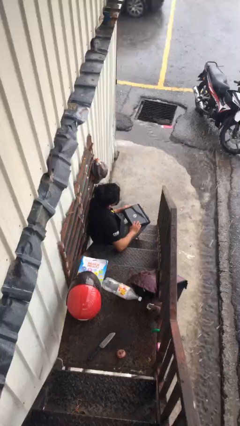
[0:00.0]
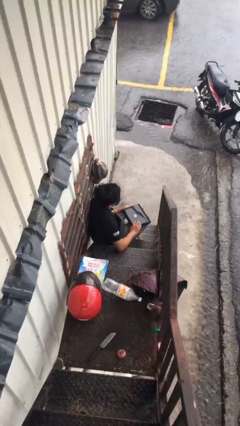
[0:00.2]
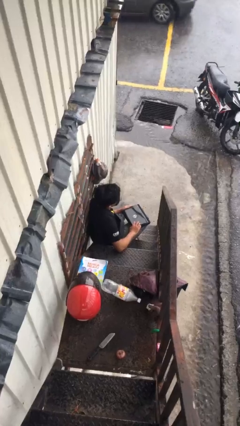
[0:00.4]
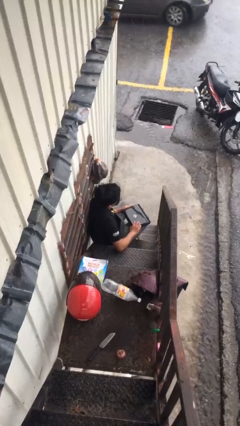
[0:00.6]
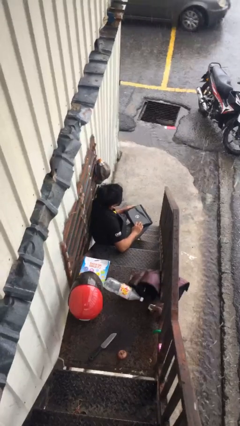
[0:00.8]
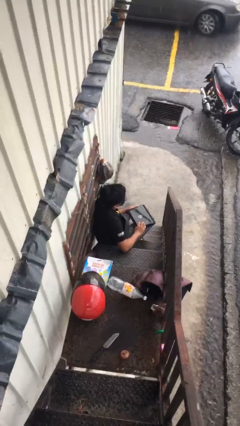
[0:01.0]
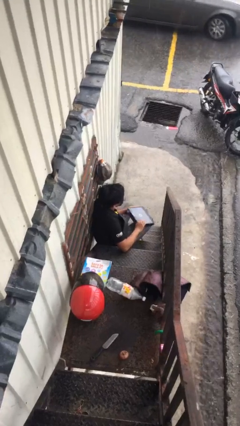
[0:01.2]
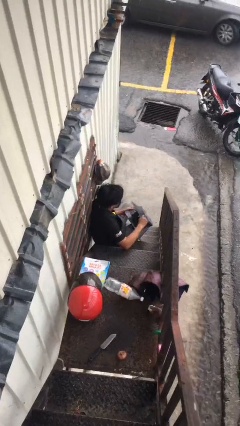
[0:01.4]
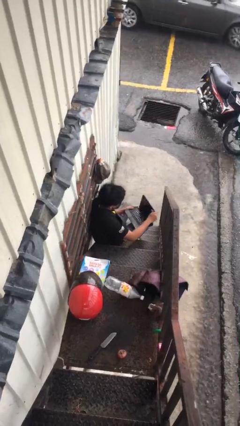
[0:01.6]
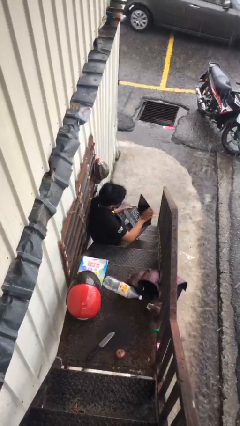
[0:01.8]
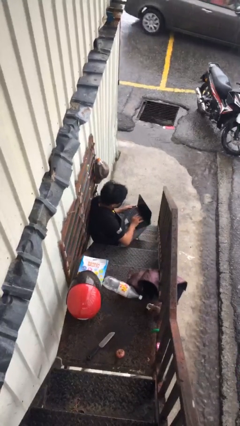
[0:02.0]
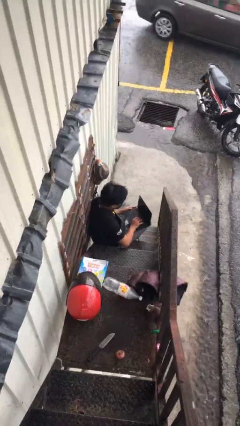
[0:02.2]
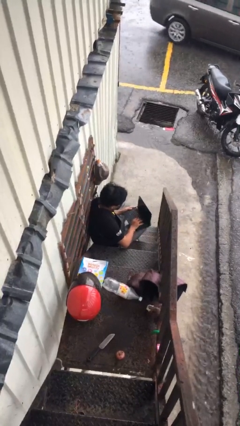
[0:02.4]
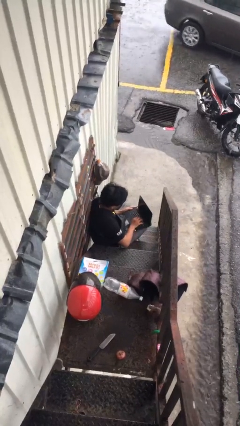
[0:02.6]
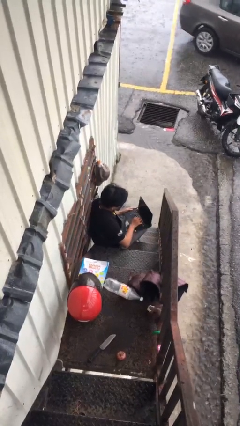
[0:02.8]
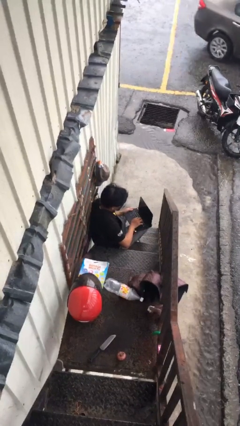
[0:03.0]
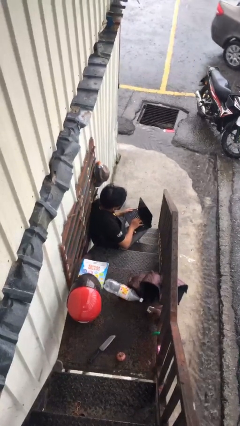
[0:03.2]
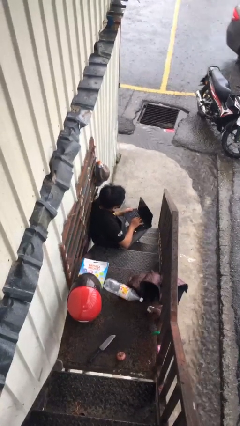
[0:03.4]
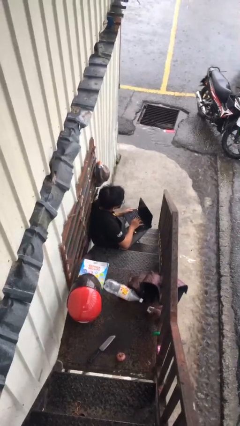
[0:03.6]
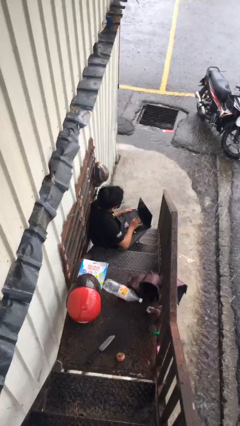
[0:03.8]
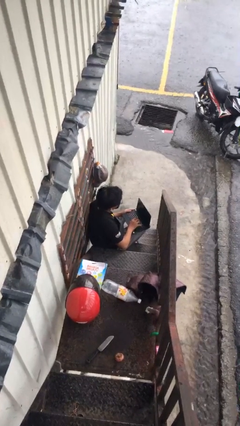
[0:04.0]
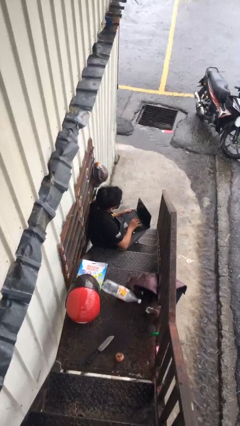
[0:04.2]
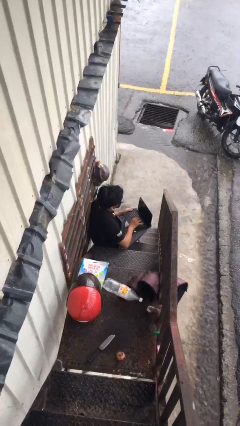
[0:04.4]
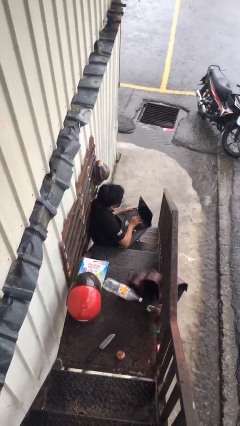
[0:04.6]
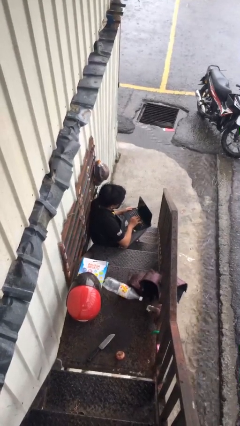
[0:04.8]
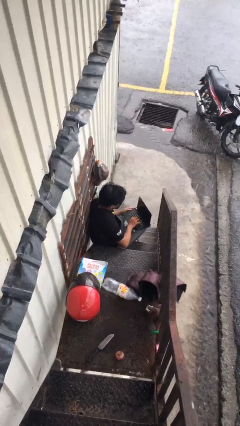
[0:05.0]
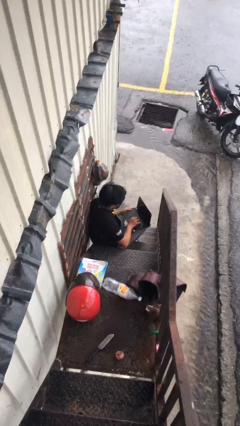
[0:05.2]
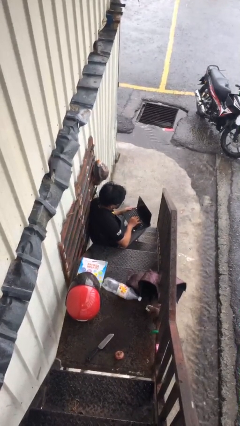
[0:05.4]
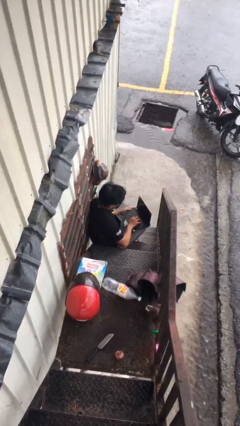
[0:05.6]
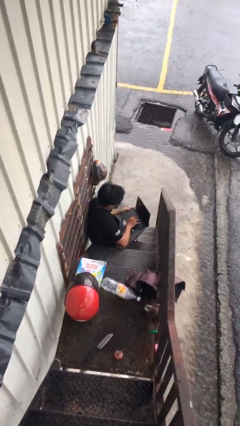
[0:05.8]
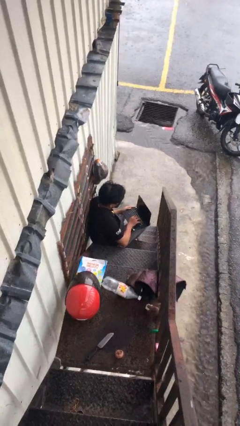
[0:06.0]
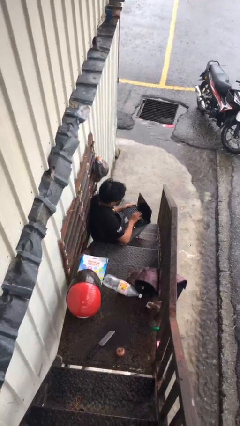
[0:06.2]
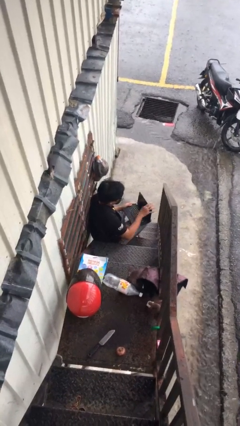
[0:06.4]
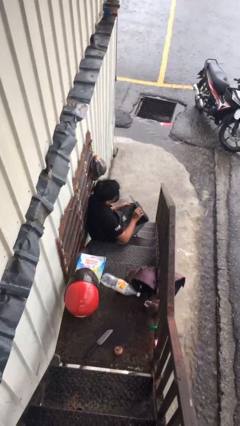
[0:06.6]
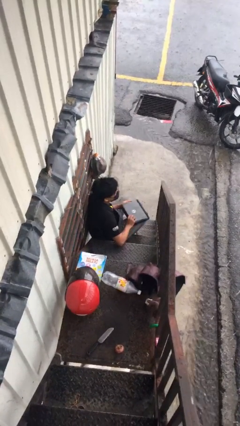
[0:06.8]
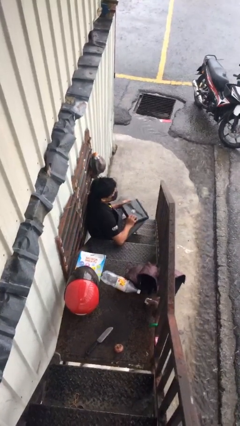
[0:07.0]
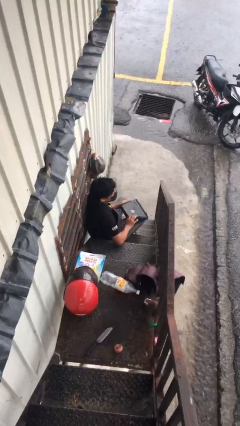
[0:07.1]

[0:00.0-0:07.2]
person interacts with laptop

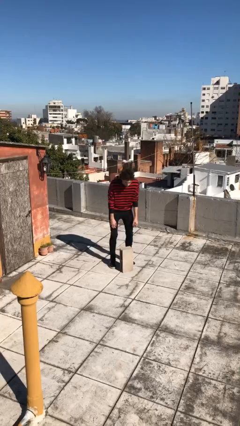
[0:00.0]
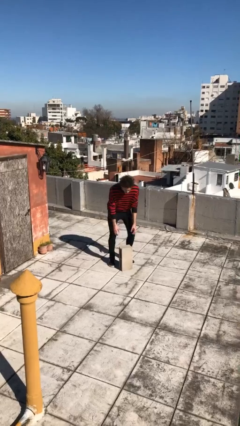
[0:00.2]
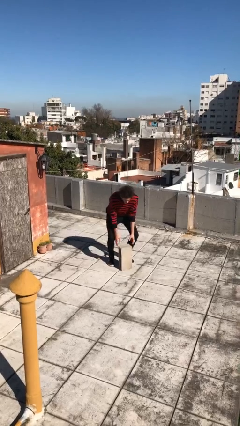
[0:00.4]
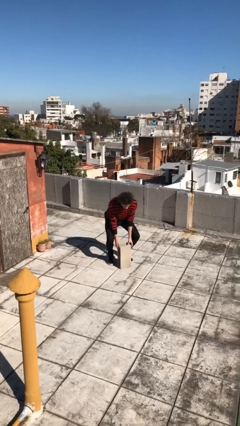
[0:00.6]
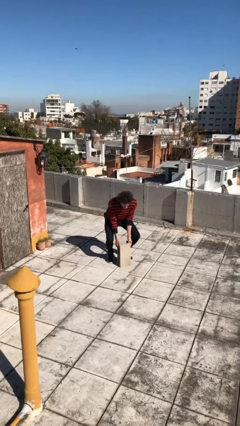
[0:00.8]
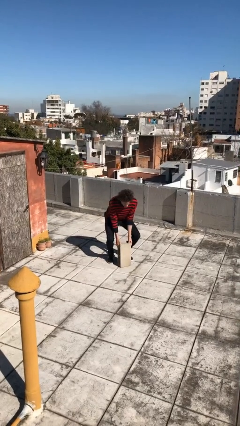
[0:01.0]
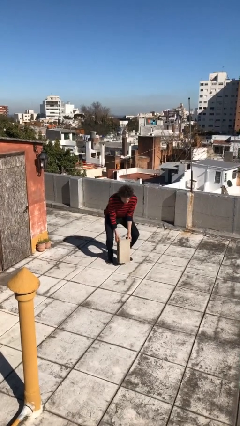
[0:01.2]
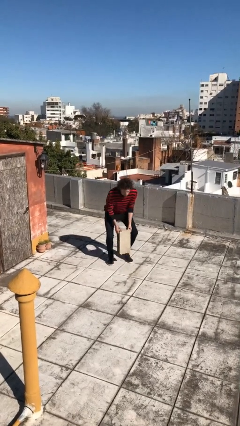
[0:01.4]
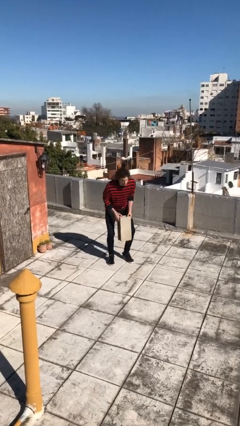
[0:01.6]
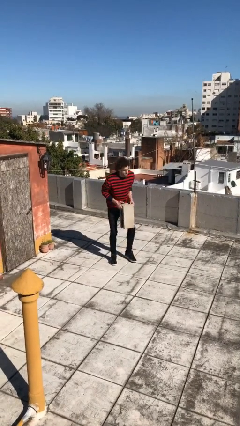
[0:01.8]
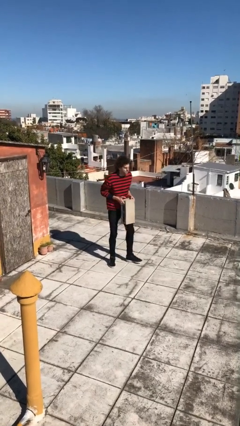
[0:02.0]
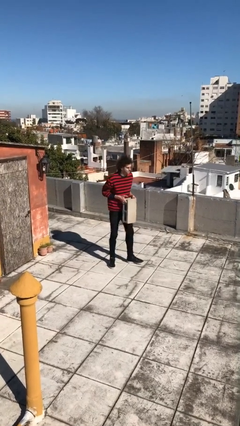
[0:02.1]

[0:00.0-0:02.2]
person picks up object from floor

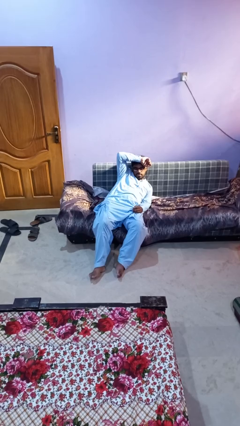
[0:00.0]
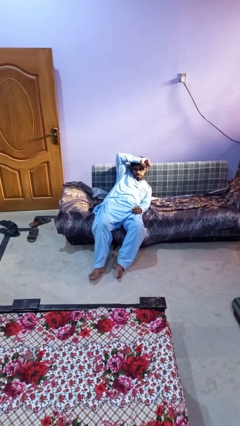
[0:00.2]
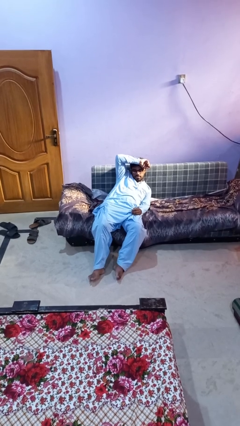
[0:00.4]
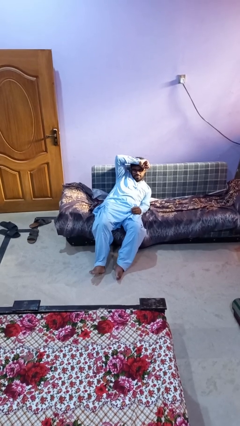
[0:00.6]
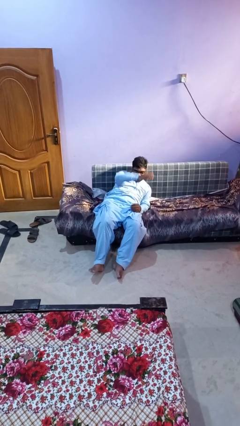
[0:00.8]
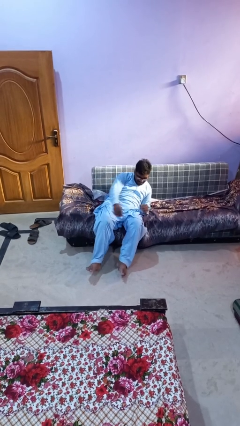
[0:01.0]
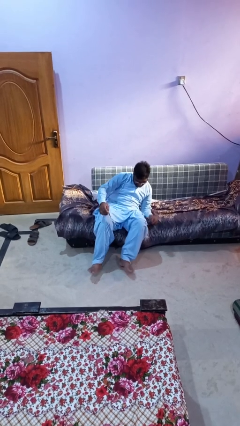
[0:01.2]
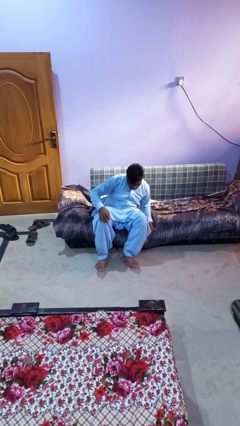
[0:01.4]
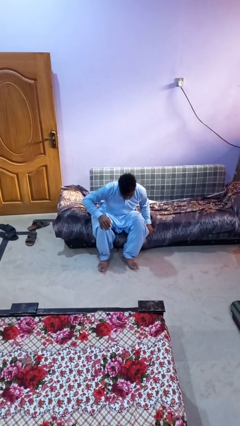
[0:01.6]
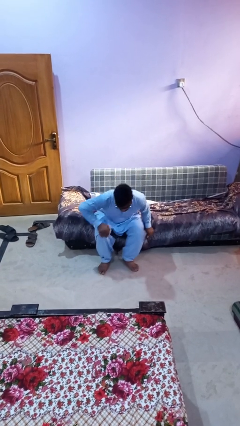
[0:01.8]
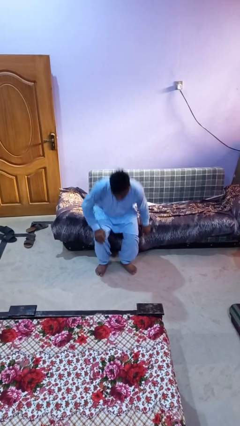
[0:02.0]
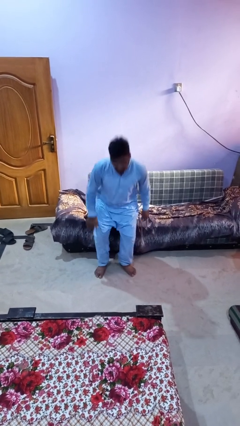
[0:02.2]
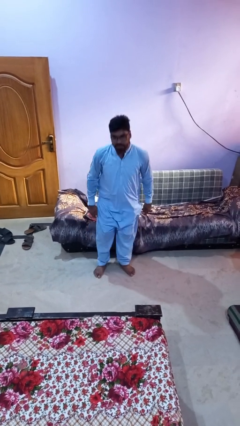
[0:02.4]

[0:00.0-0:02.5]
person stands up

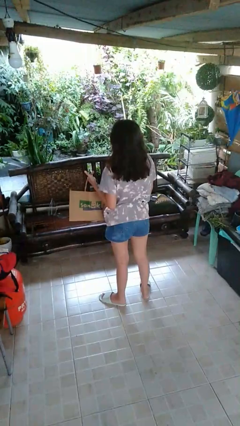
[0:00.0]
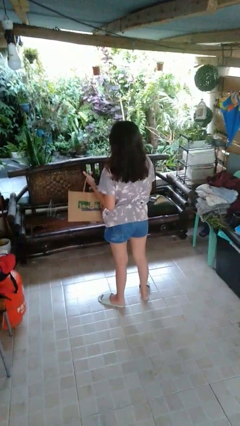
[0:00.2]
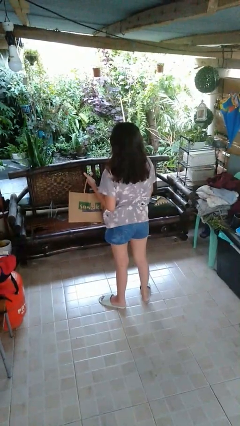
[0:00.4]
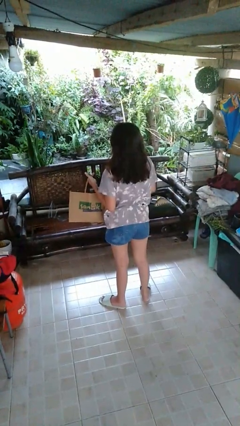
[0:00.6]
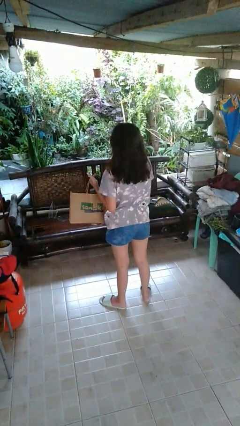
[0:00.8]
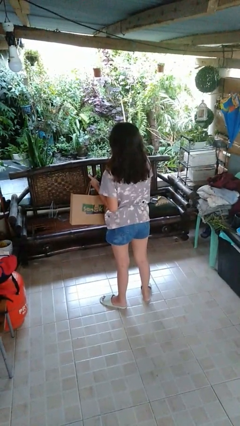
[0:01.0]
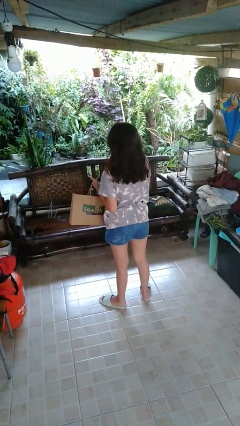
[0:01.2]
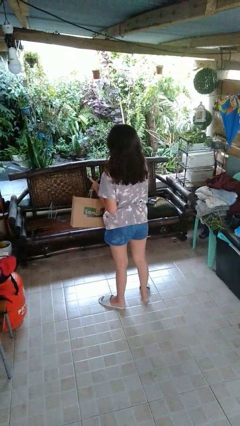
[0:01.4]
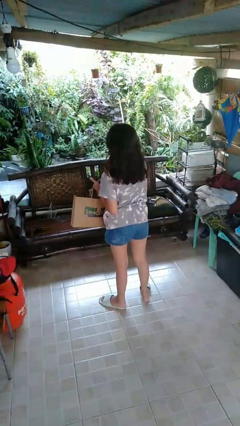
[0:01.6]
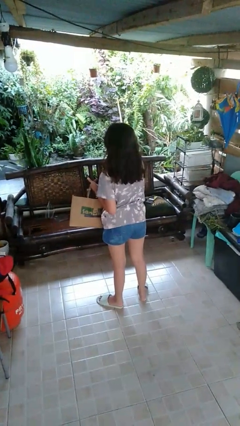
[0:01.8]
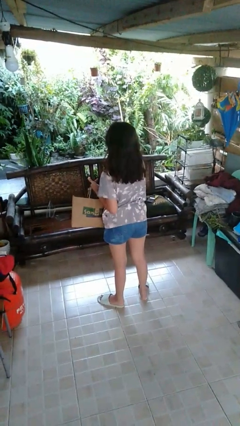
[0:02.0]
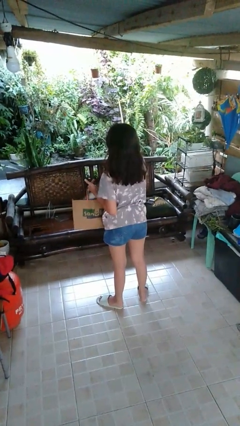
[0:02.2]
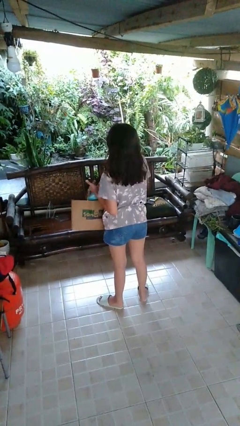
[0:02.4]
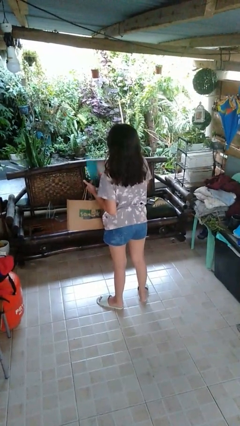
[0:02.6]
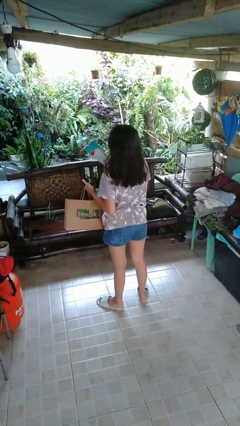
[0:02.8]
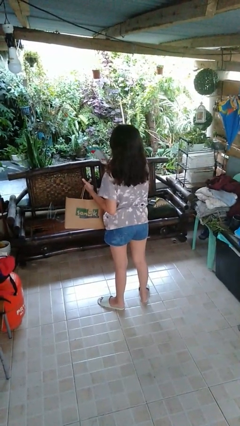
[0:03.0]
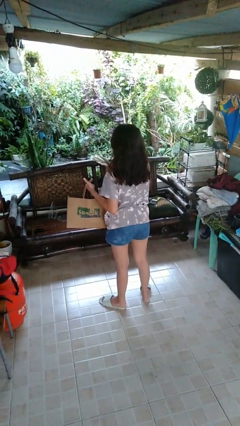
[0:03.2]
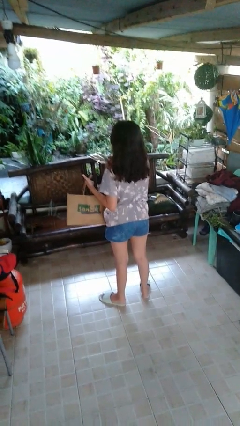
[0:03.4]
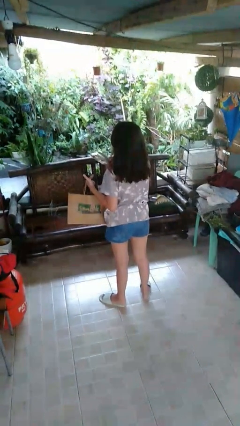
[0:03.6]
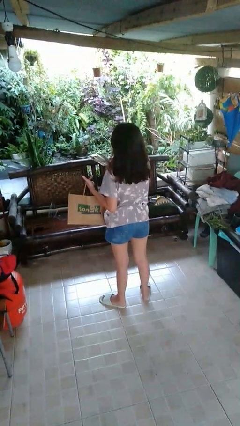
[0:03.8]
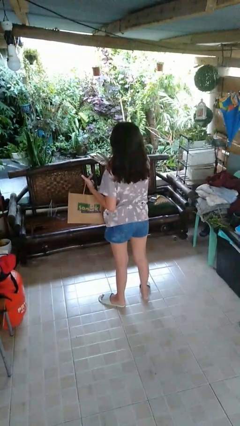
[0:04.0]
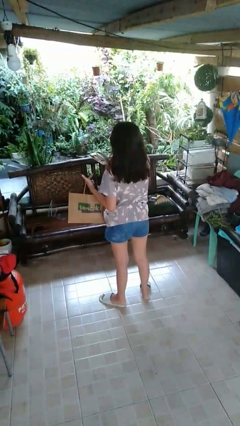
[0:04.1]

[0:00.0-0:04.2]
person takes object from bag

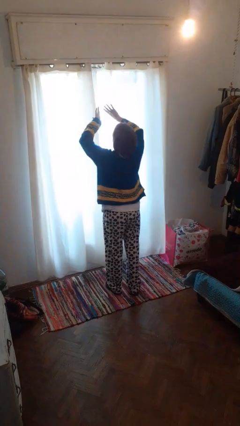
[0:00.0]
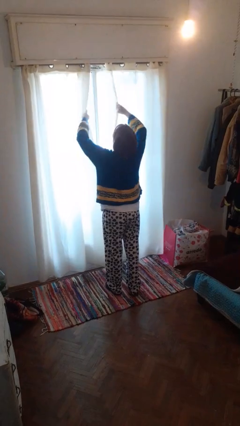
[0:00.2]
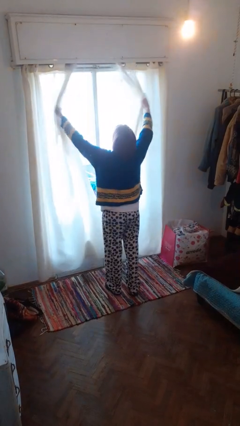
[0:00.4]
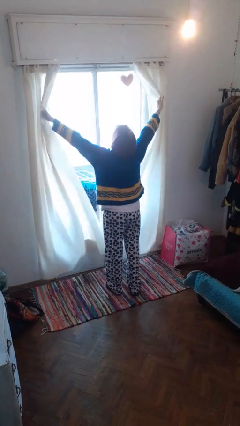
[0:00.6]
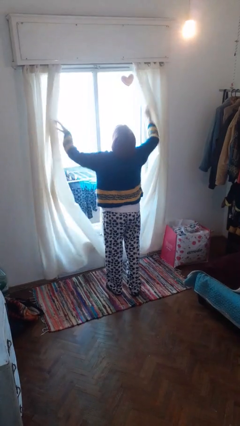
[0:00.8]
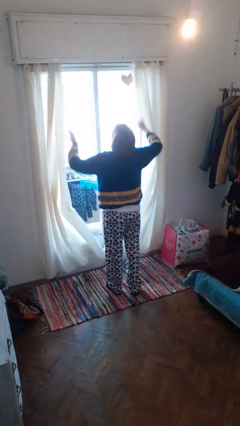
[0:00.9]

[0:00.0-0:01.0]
person opens curtains

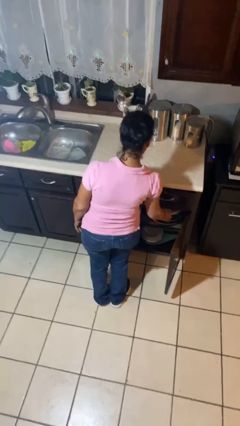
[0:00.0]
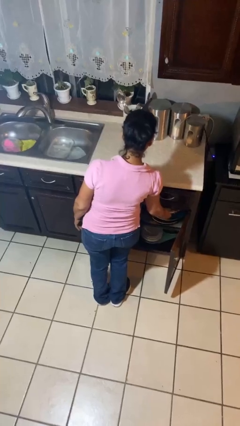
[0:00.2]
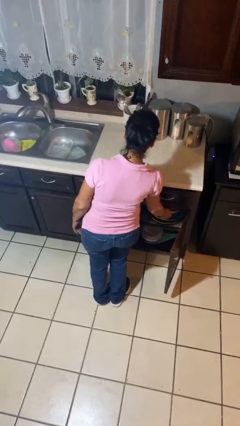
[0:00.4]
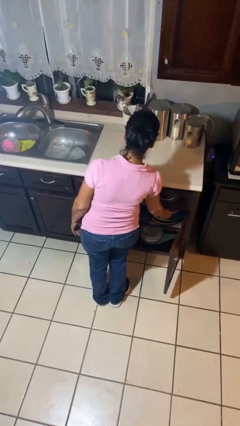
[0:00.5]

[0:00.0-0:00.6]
person takes object from cabinet
